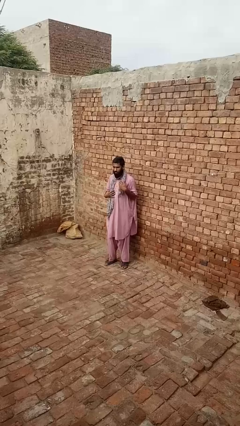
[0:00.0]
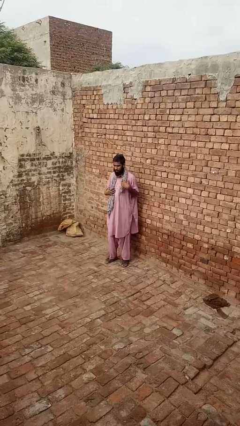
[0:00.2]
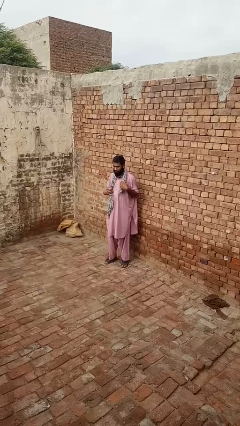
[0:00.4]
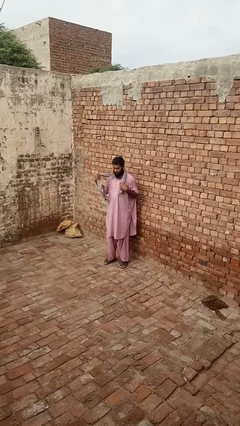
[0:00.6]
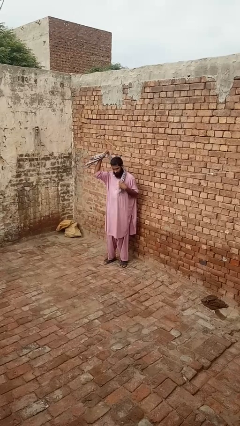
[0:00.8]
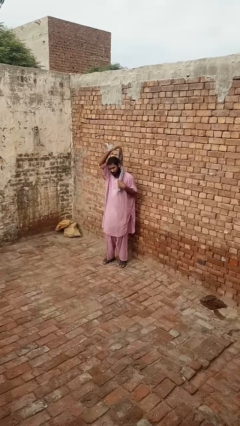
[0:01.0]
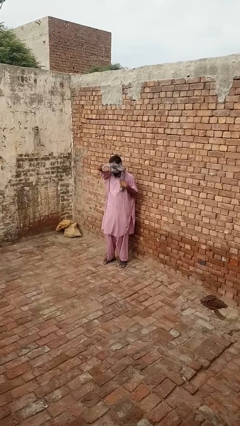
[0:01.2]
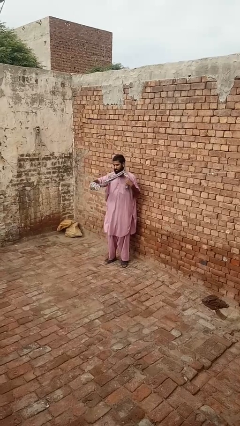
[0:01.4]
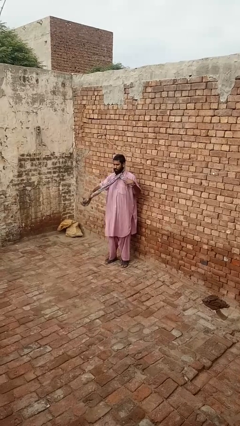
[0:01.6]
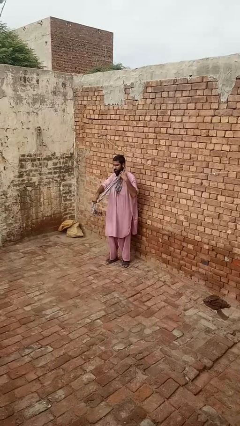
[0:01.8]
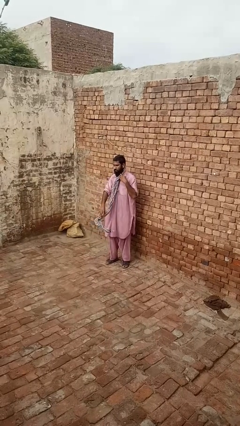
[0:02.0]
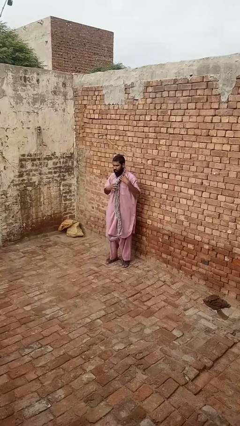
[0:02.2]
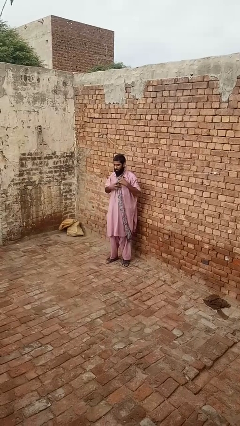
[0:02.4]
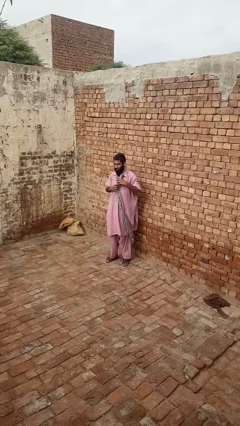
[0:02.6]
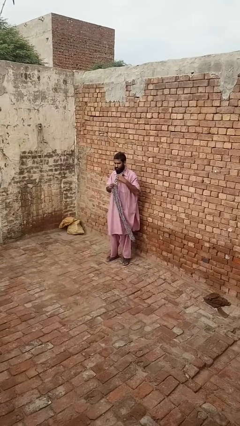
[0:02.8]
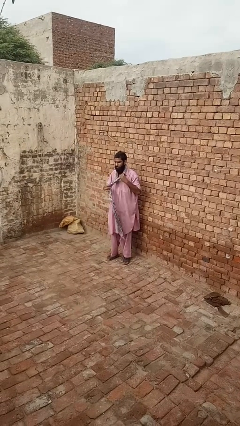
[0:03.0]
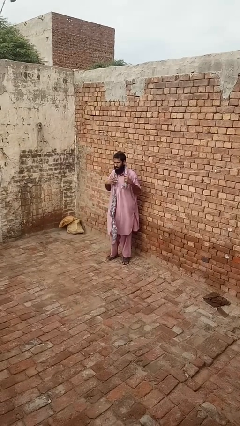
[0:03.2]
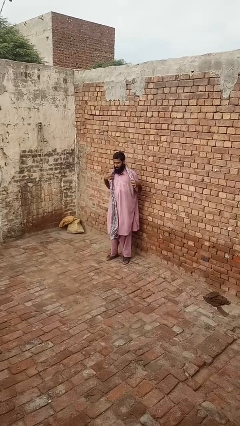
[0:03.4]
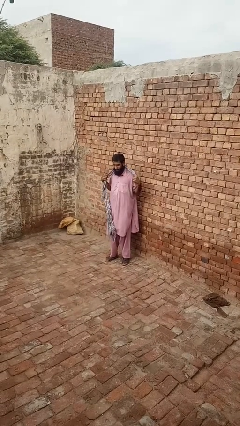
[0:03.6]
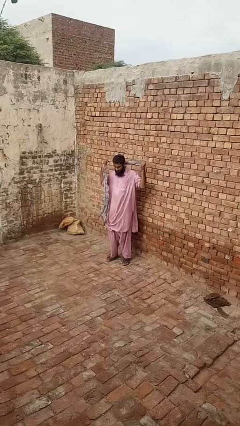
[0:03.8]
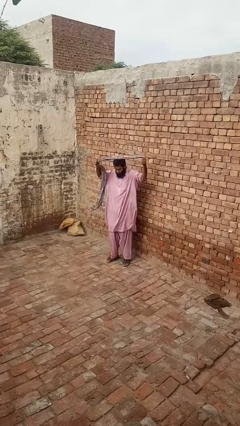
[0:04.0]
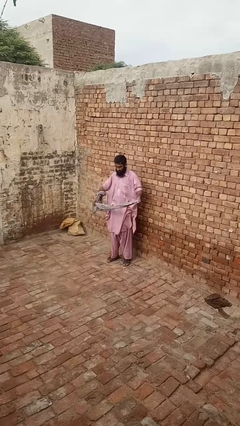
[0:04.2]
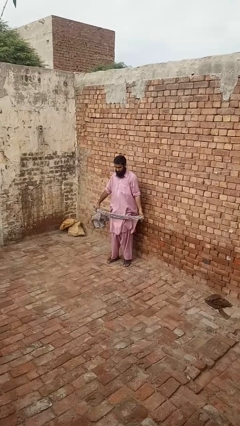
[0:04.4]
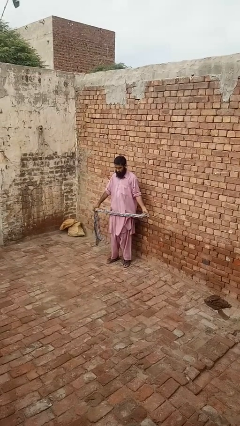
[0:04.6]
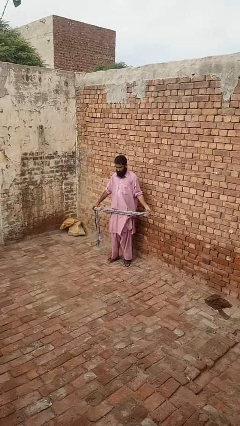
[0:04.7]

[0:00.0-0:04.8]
person takes off scarf

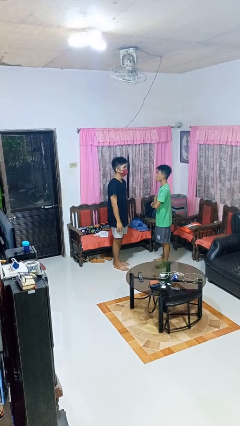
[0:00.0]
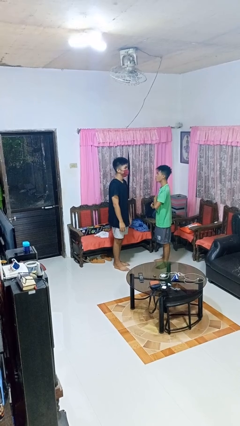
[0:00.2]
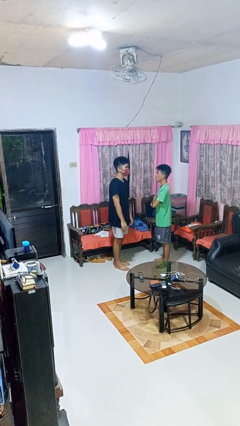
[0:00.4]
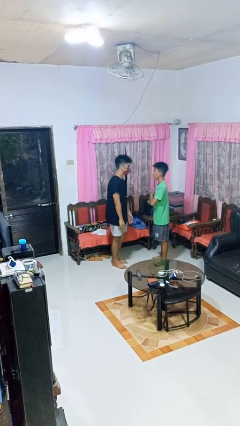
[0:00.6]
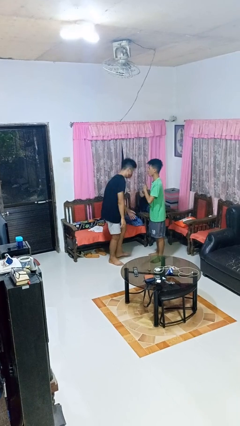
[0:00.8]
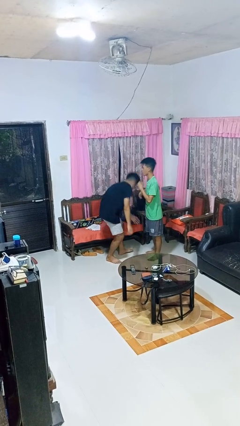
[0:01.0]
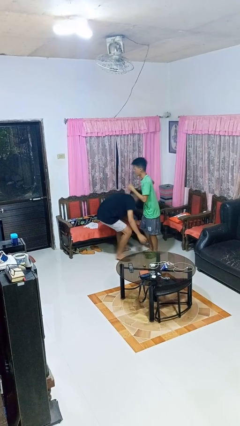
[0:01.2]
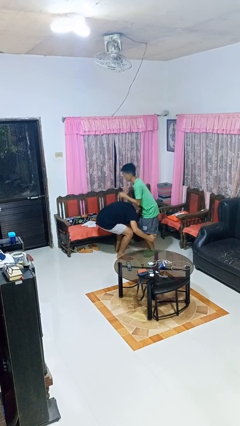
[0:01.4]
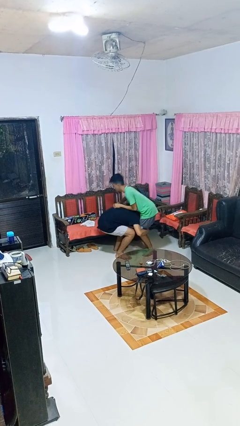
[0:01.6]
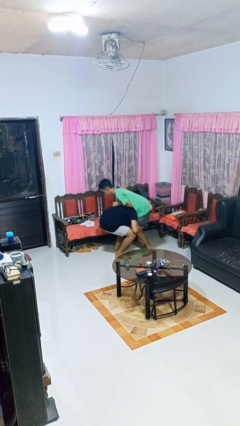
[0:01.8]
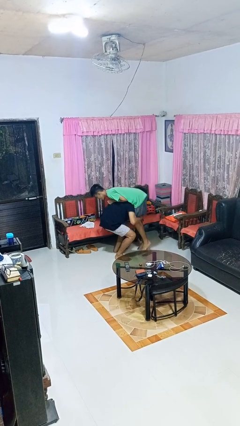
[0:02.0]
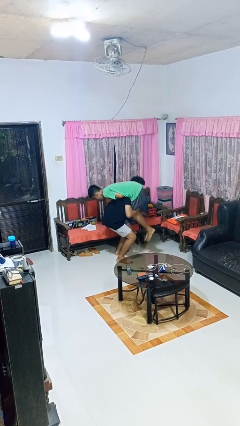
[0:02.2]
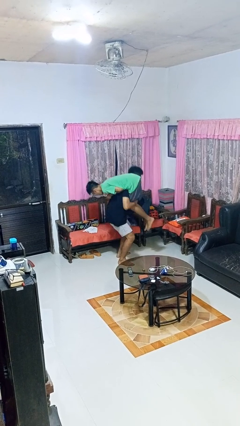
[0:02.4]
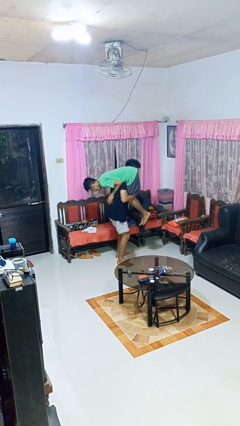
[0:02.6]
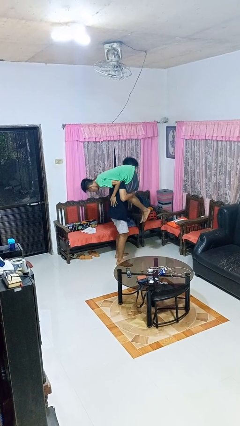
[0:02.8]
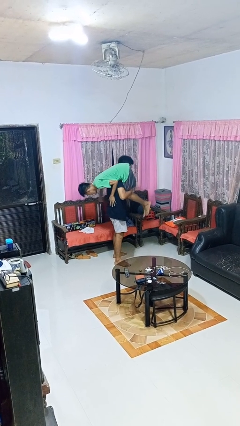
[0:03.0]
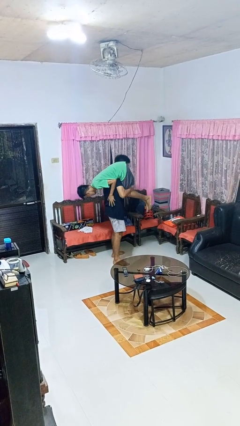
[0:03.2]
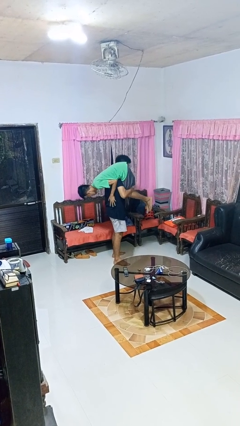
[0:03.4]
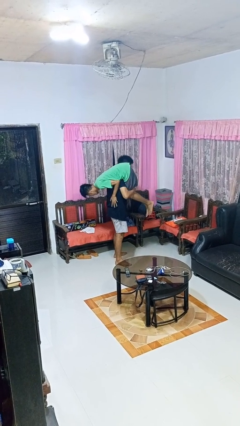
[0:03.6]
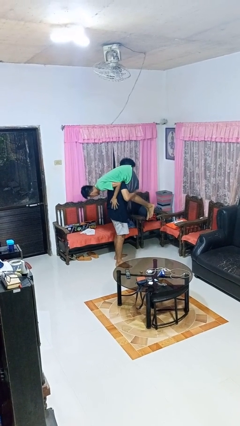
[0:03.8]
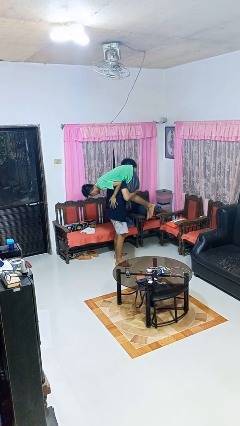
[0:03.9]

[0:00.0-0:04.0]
person carries person over shoulder

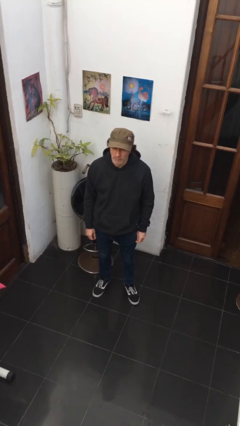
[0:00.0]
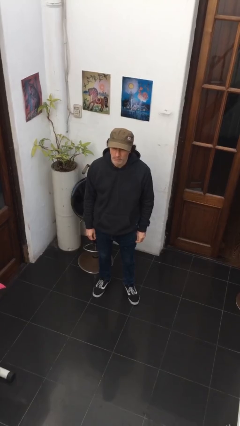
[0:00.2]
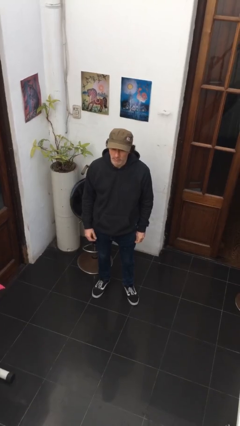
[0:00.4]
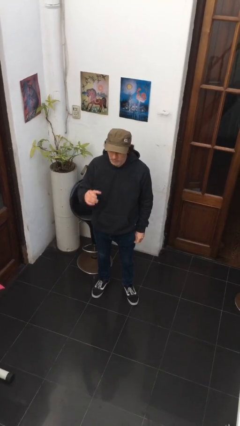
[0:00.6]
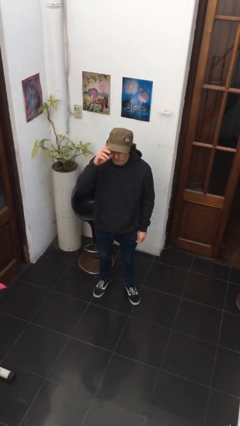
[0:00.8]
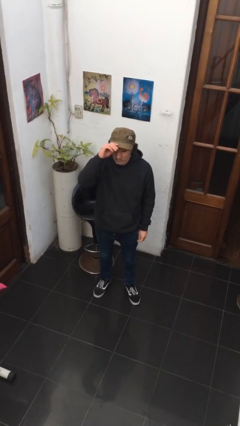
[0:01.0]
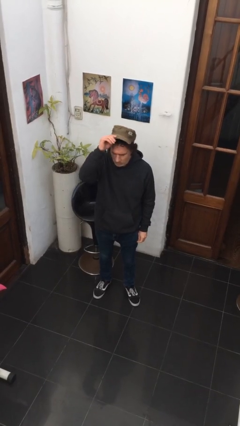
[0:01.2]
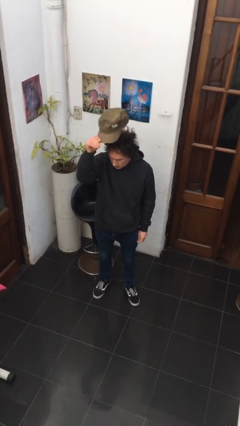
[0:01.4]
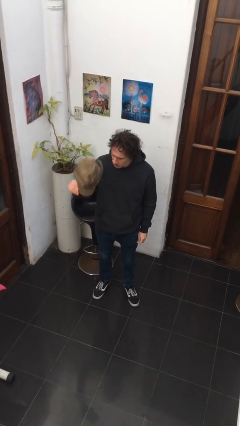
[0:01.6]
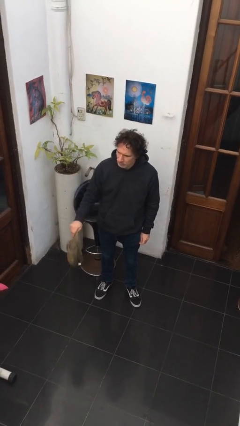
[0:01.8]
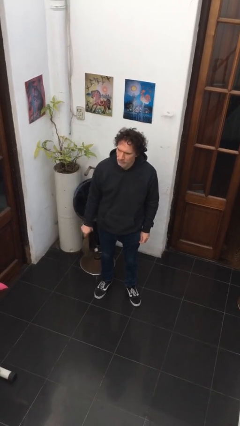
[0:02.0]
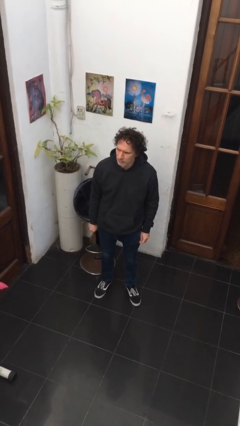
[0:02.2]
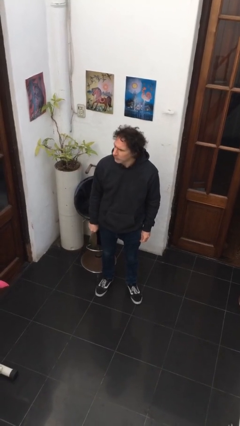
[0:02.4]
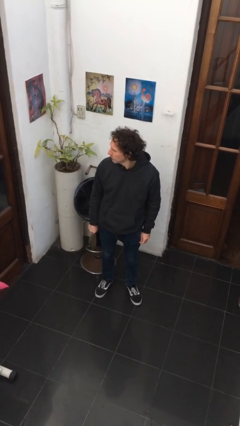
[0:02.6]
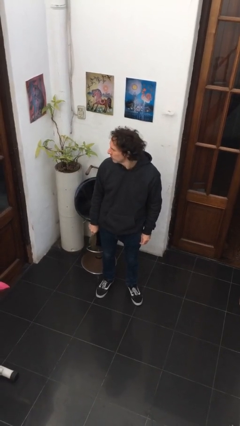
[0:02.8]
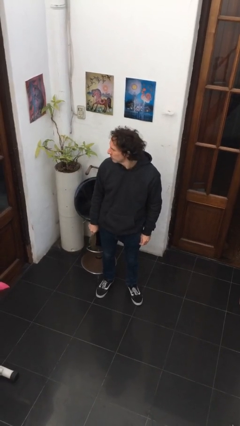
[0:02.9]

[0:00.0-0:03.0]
person takes off hat

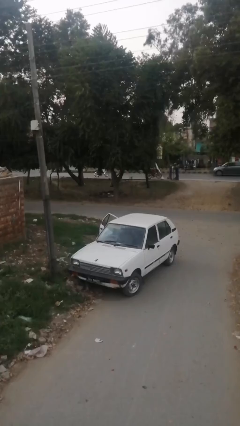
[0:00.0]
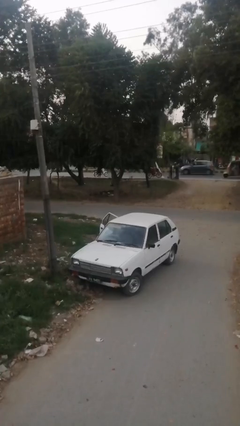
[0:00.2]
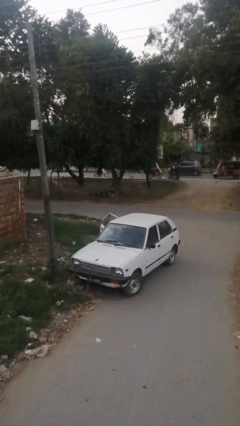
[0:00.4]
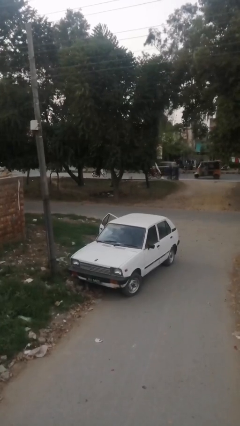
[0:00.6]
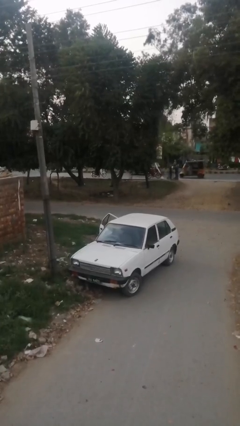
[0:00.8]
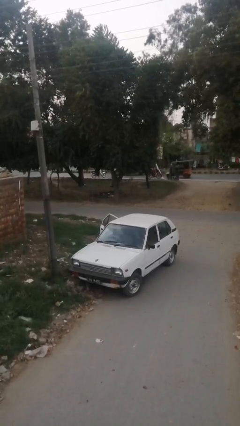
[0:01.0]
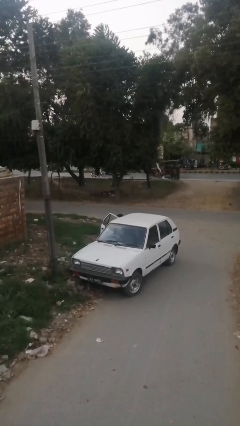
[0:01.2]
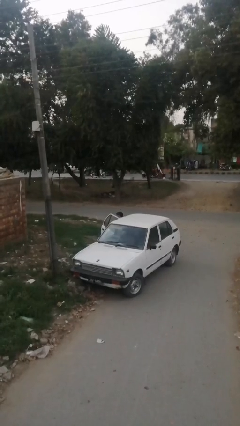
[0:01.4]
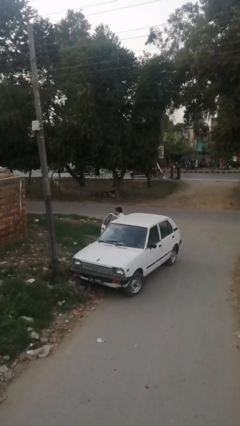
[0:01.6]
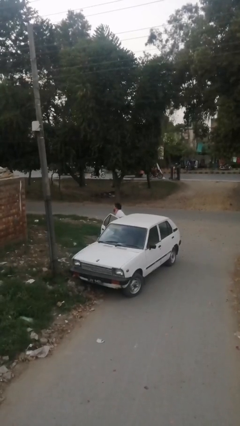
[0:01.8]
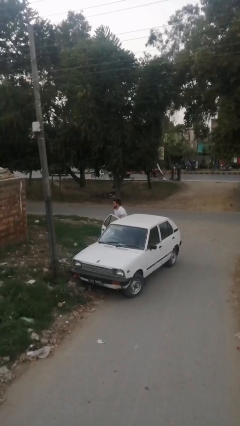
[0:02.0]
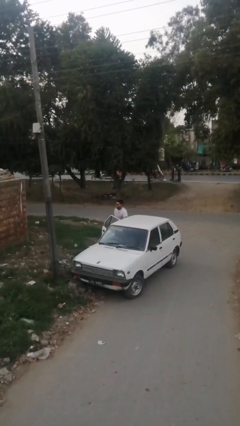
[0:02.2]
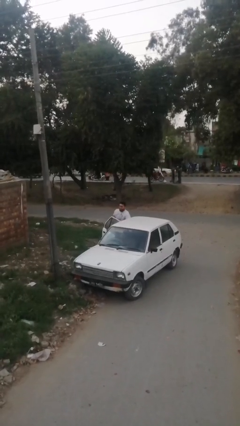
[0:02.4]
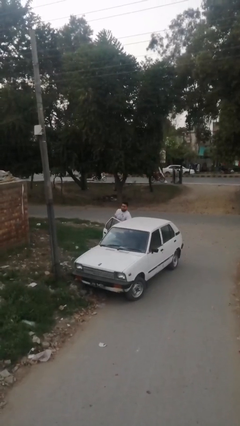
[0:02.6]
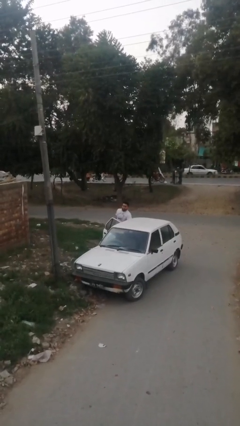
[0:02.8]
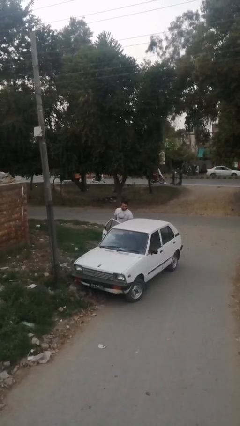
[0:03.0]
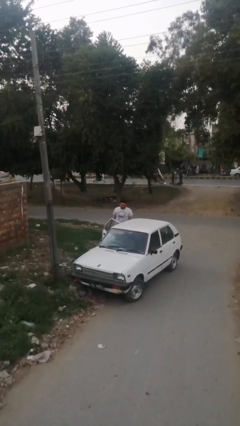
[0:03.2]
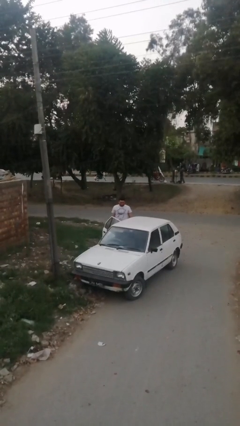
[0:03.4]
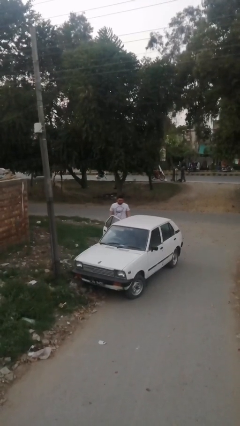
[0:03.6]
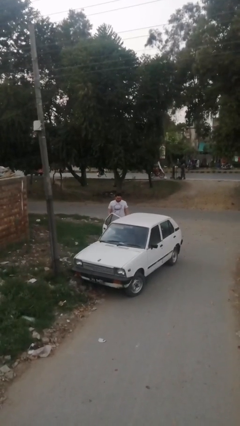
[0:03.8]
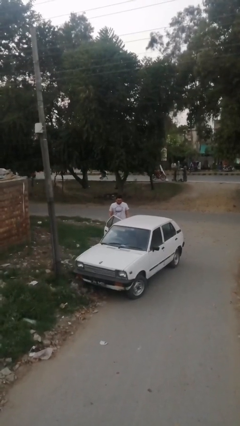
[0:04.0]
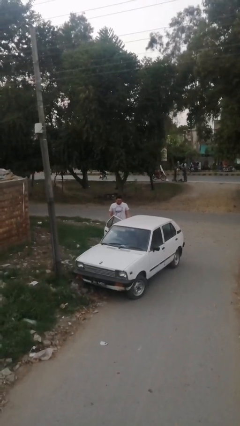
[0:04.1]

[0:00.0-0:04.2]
person exits car

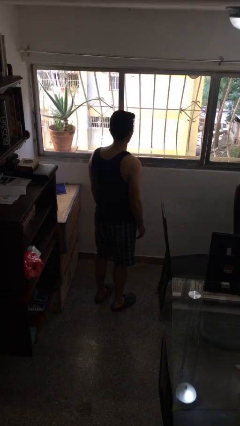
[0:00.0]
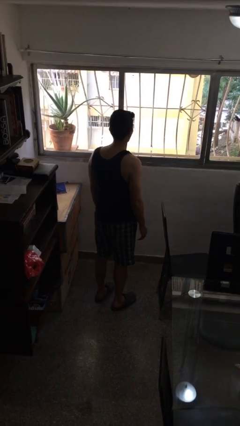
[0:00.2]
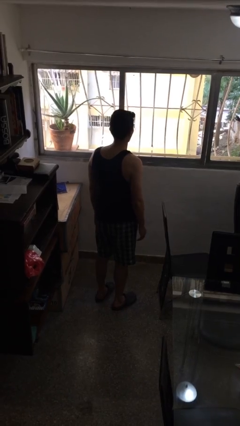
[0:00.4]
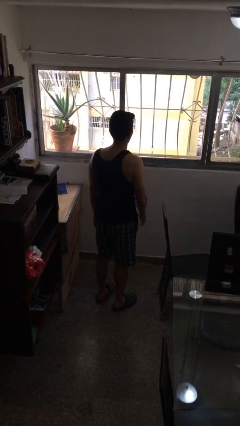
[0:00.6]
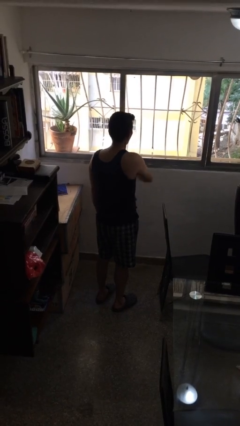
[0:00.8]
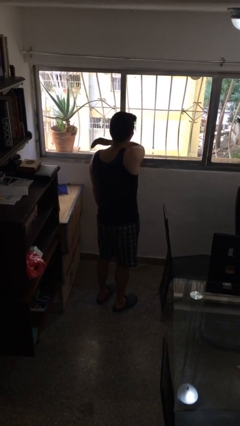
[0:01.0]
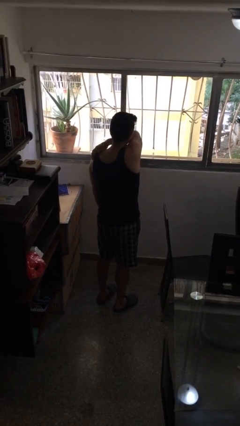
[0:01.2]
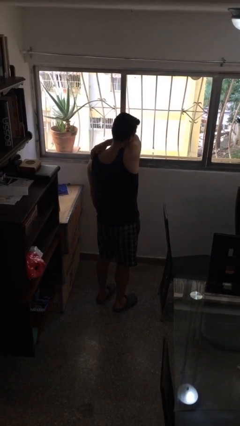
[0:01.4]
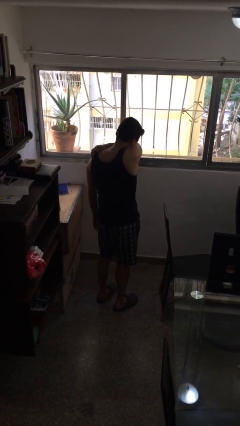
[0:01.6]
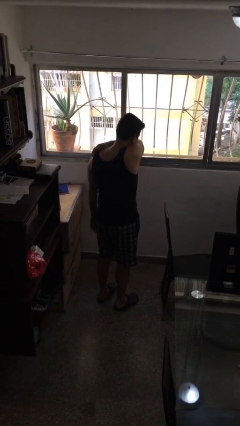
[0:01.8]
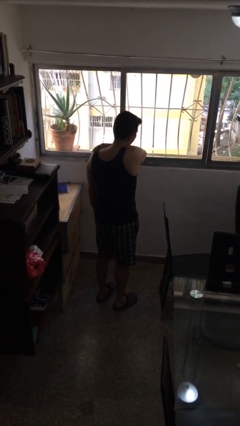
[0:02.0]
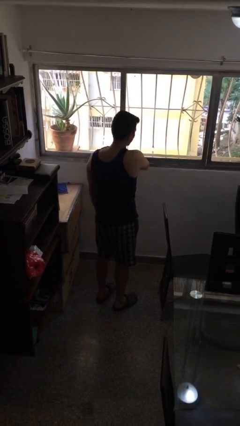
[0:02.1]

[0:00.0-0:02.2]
person sneezes into arm
